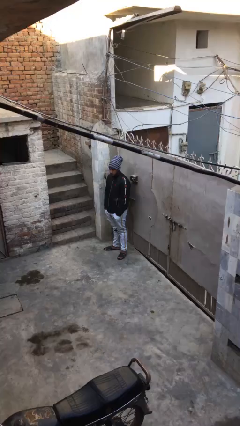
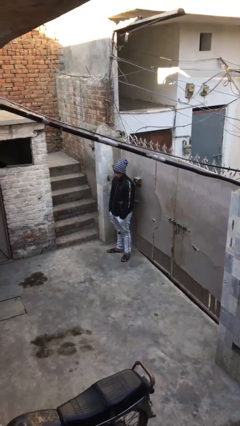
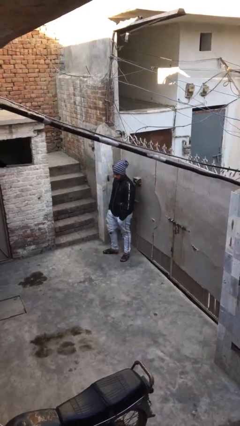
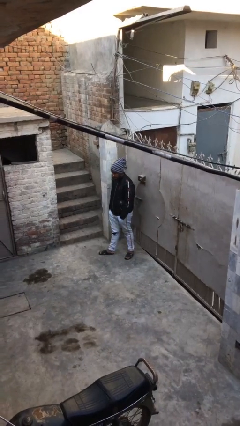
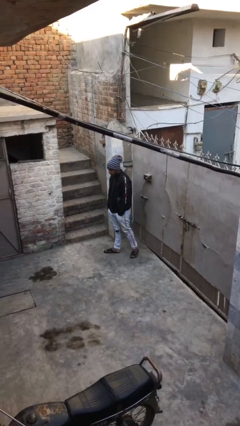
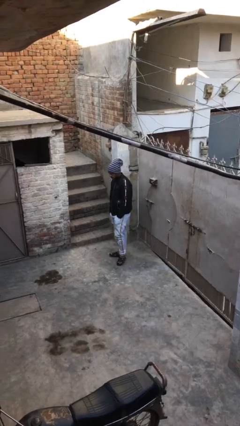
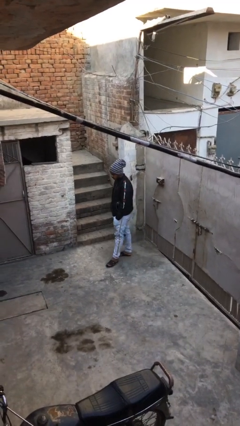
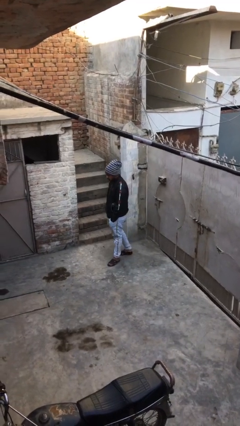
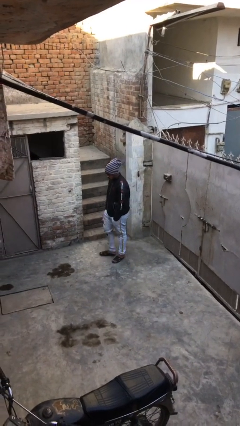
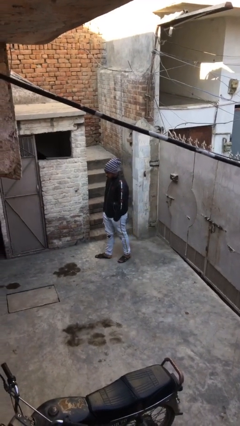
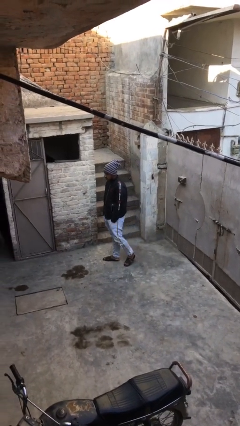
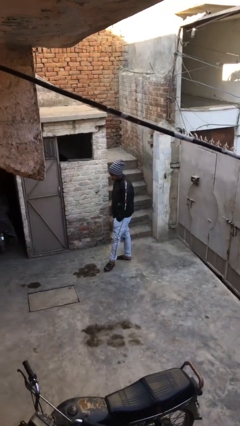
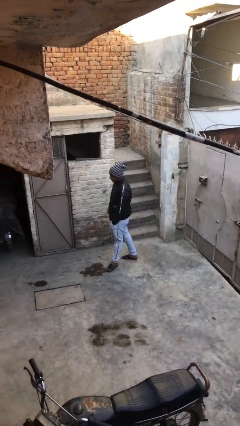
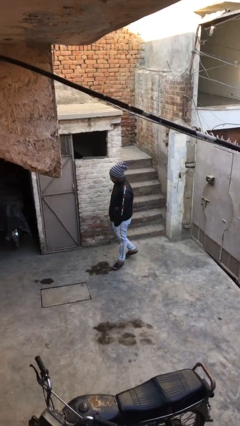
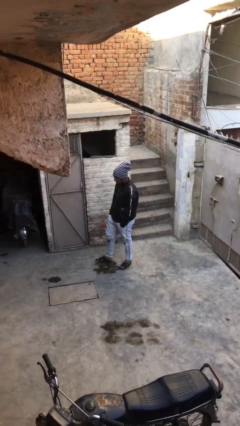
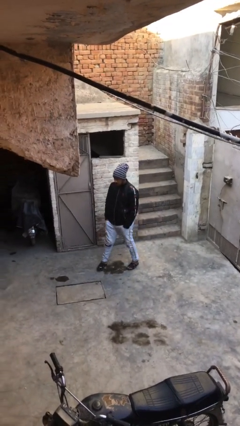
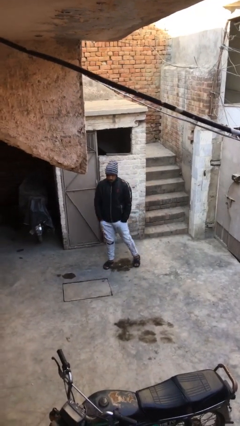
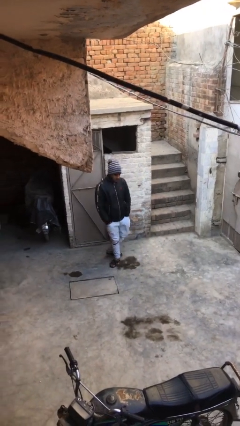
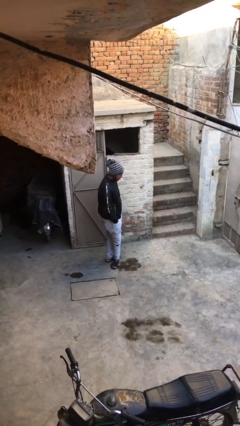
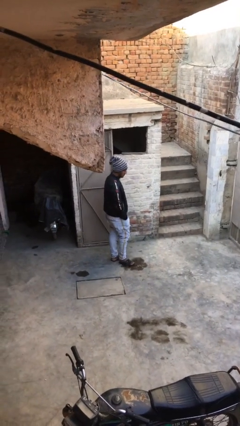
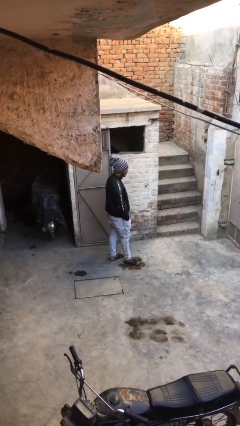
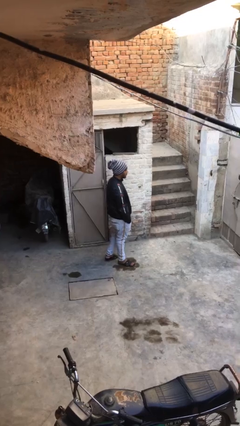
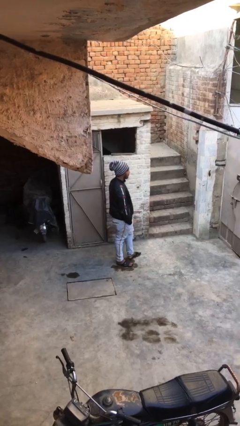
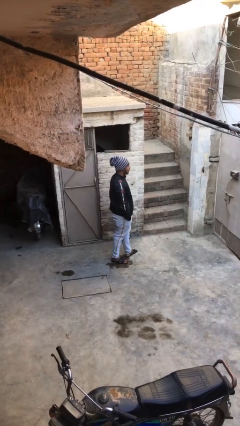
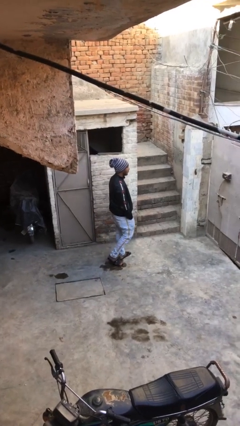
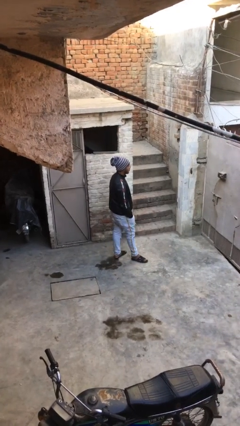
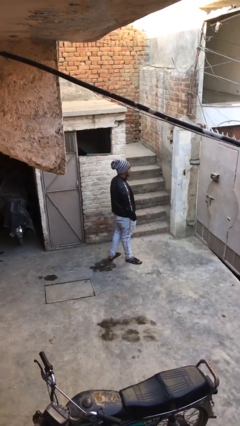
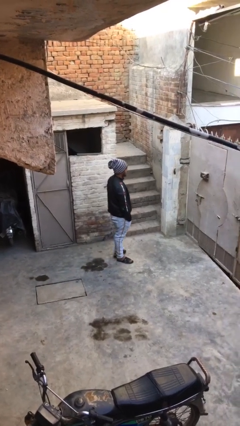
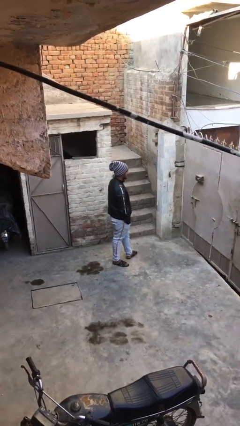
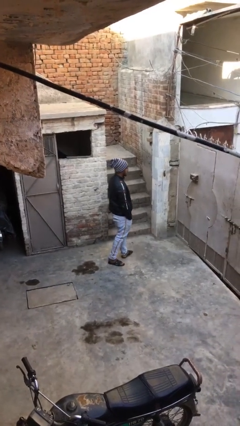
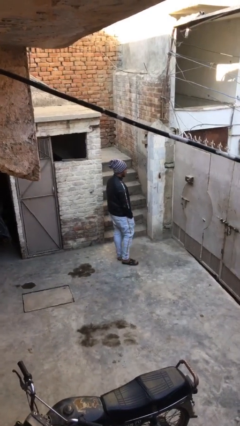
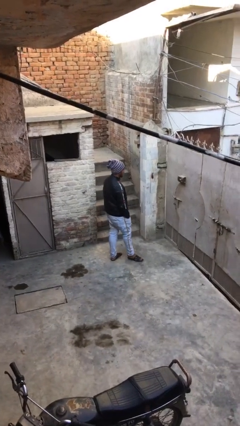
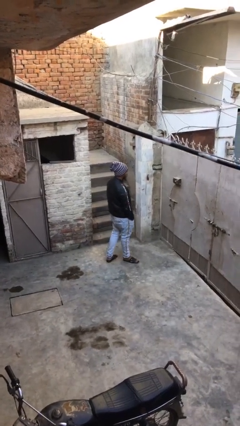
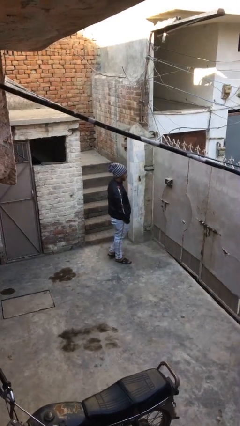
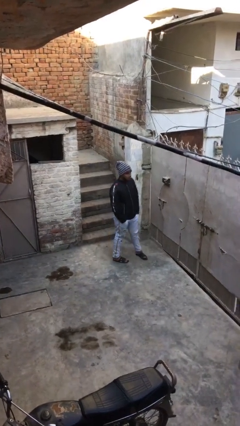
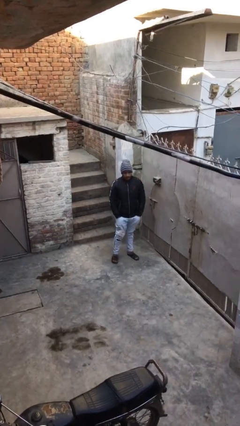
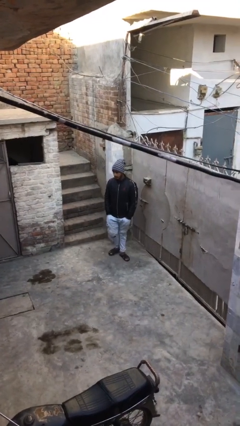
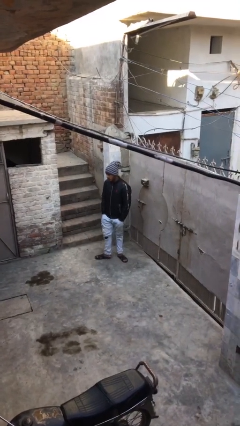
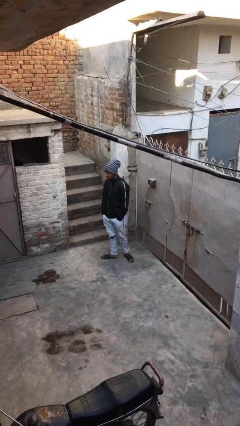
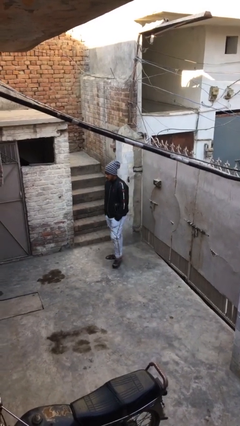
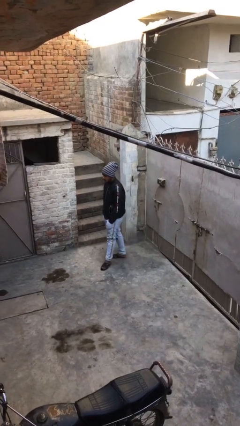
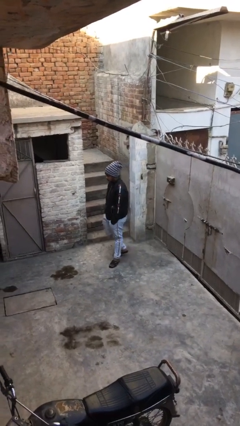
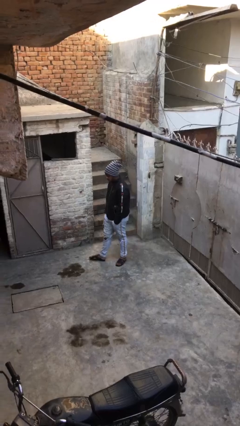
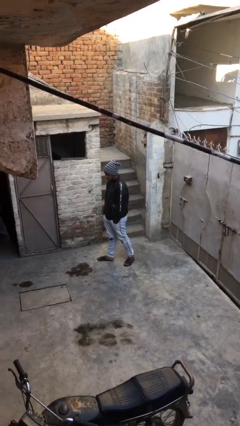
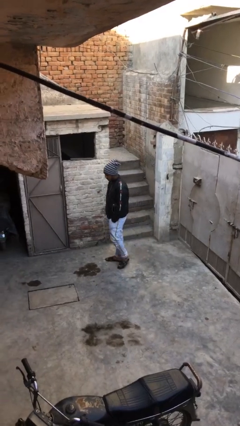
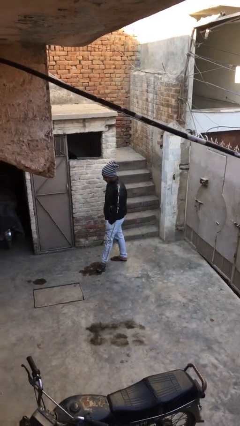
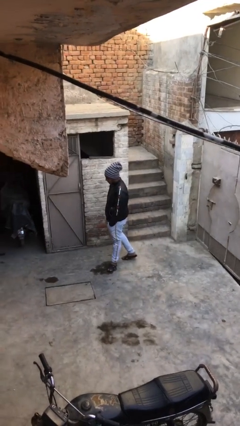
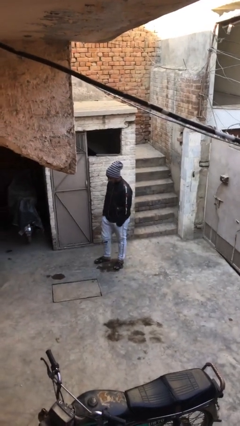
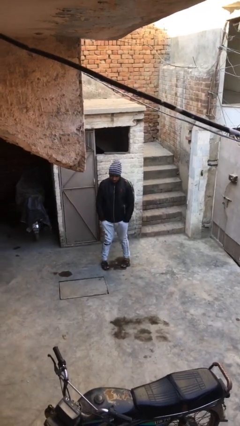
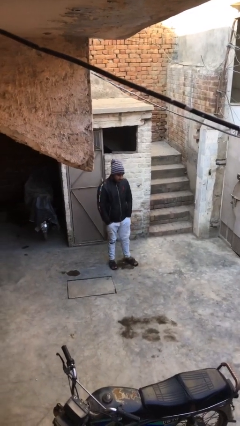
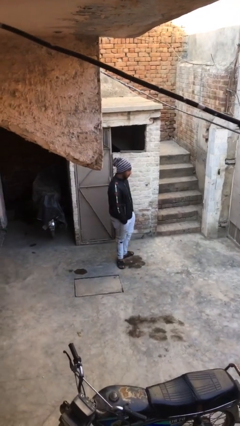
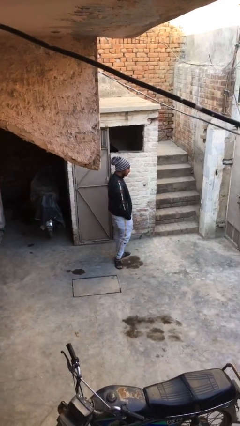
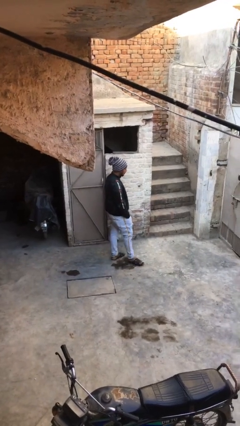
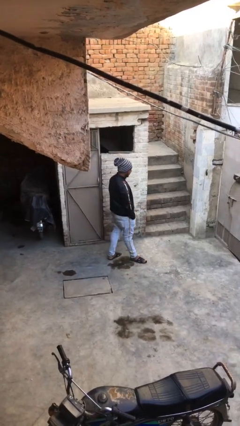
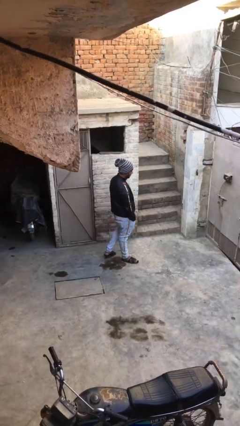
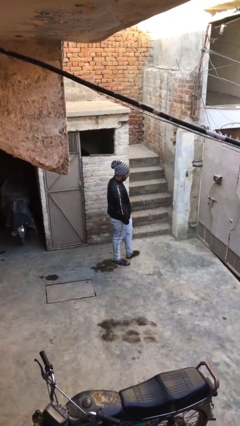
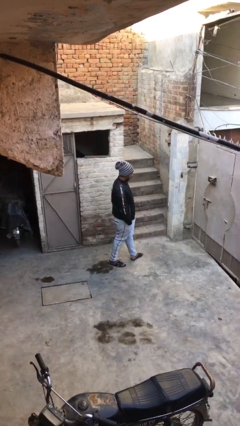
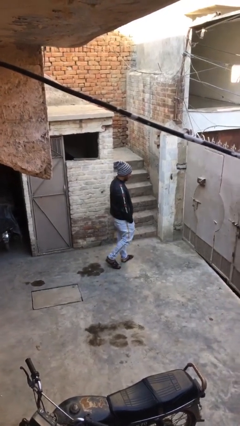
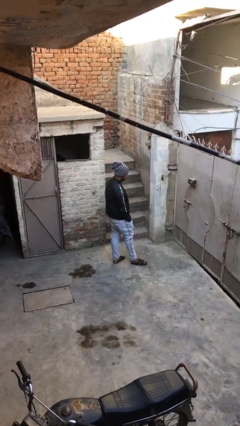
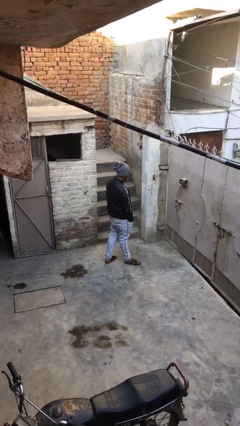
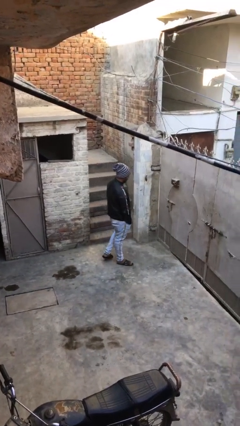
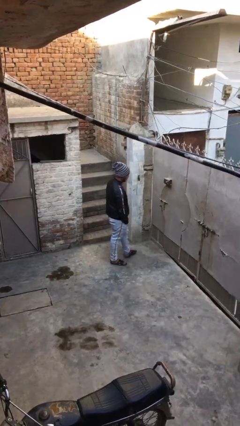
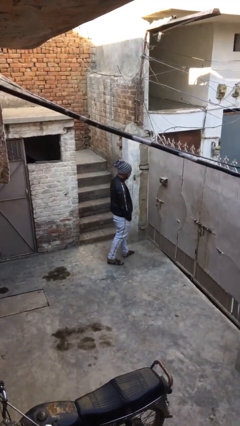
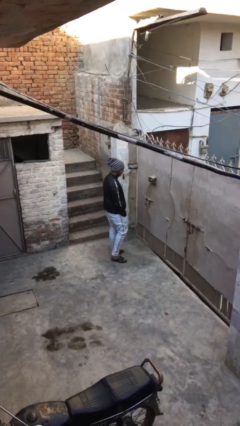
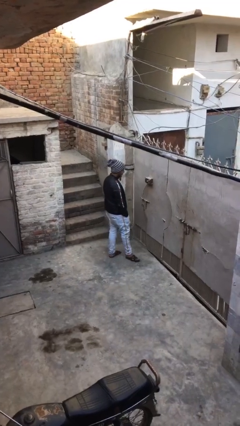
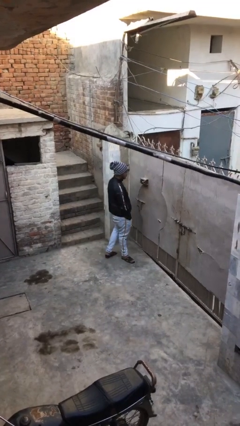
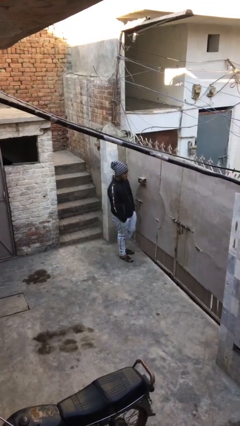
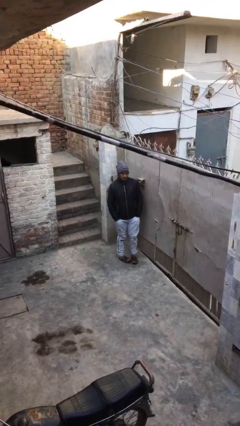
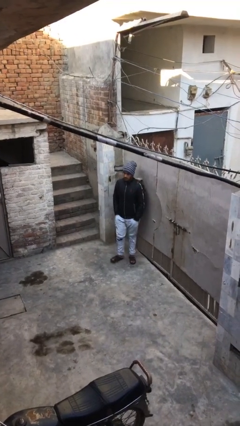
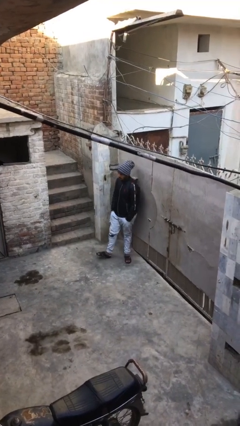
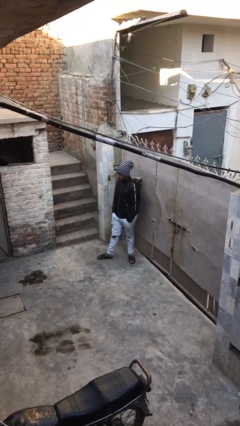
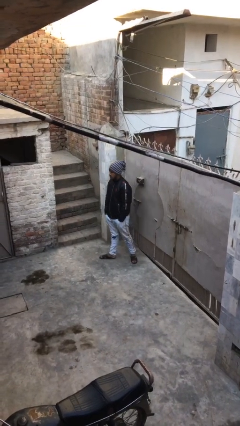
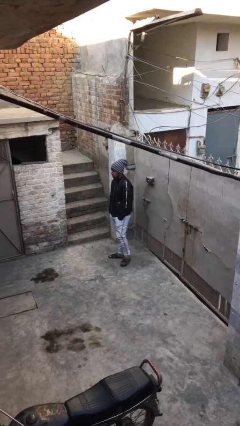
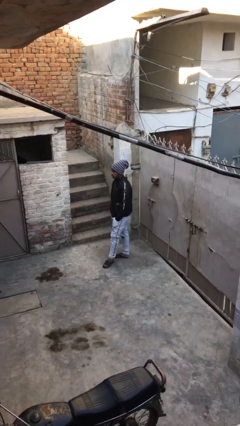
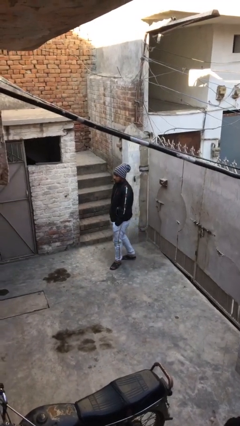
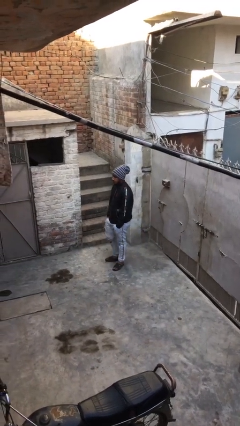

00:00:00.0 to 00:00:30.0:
person walks

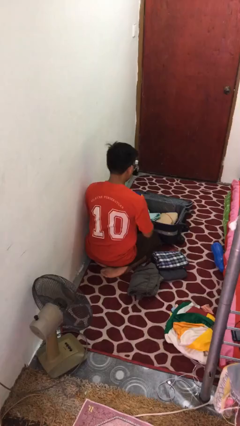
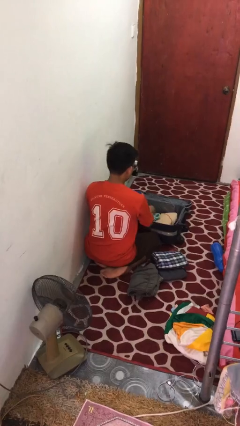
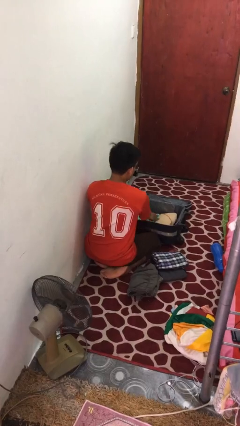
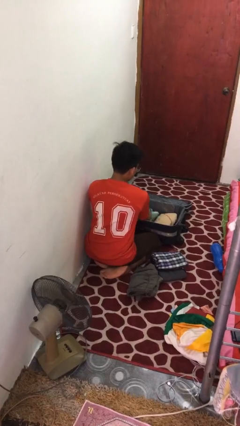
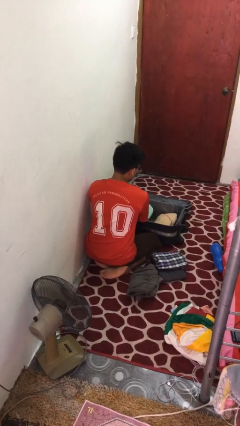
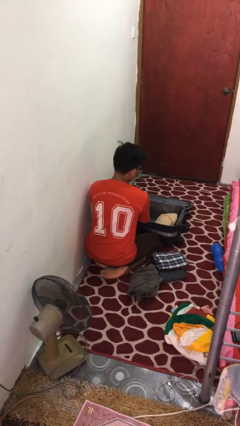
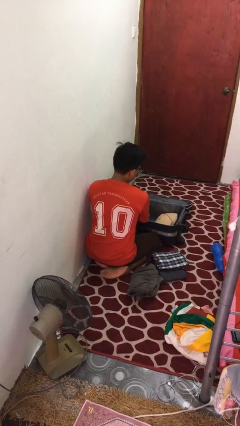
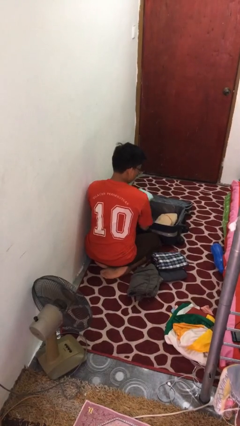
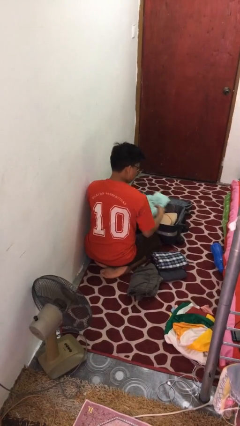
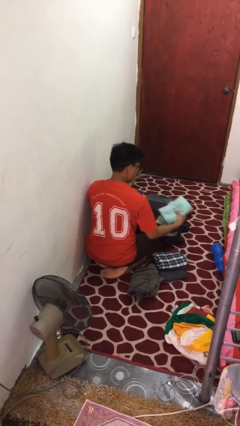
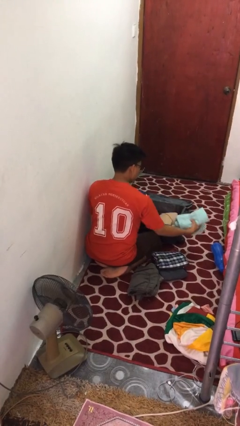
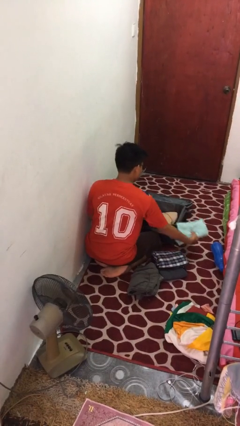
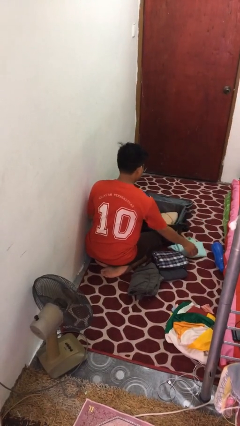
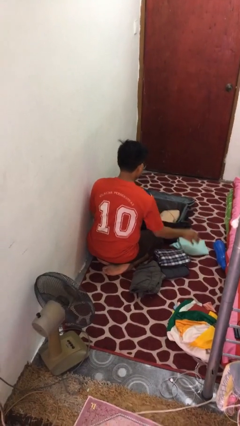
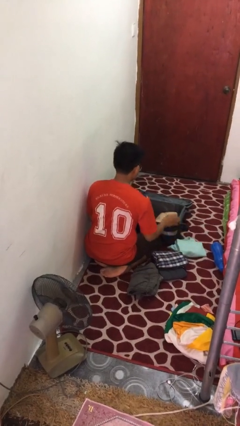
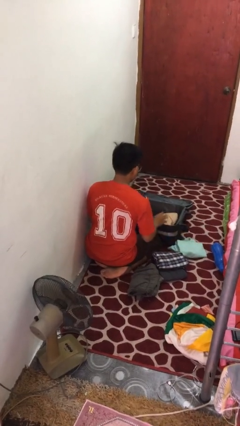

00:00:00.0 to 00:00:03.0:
person unloads clothes from suitcase
